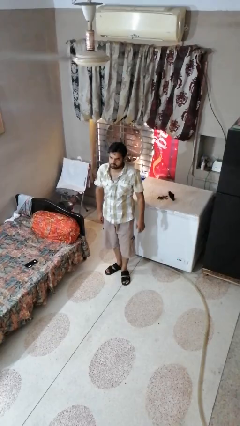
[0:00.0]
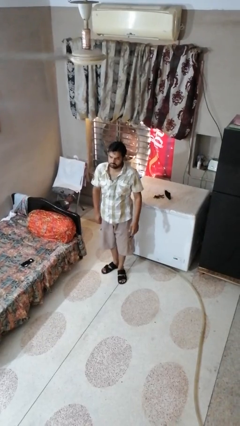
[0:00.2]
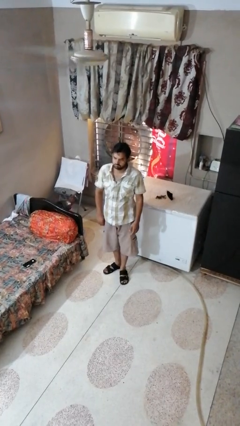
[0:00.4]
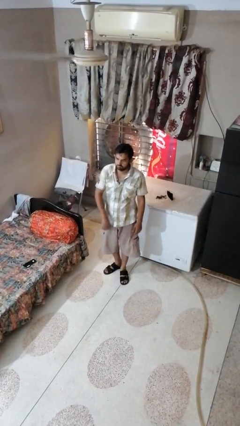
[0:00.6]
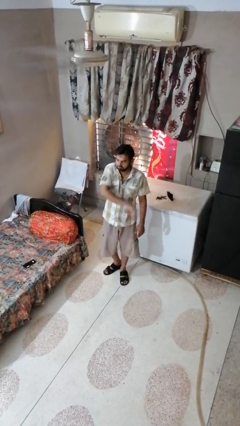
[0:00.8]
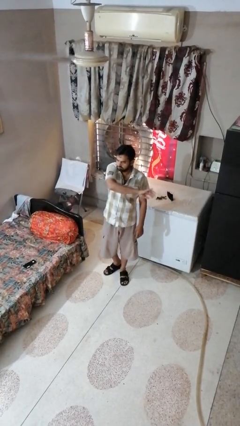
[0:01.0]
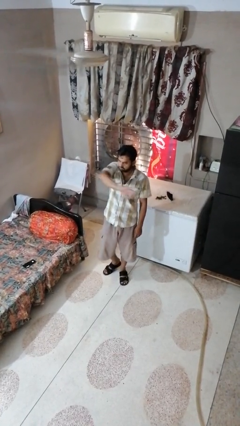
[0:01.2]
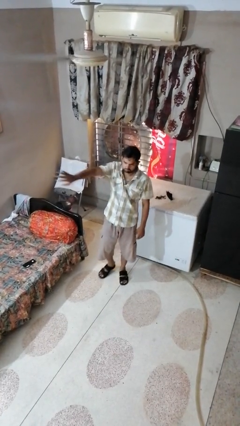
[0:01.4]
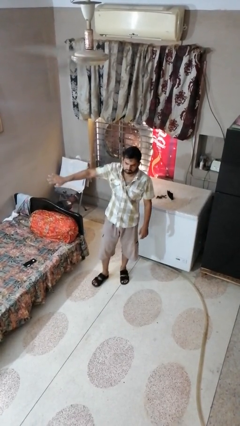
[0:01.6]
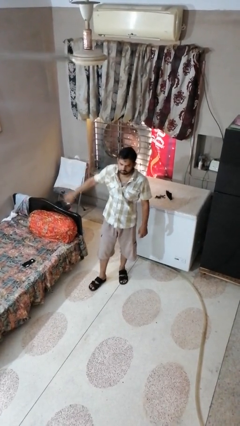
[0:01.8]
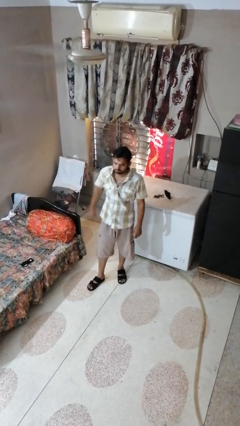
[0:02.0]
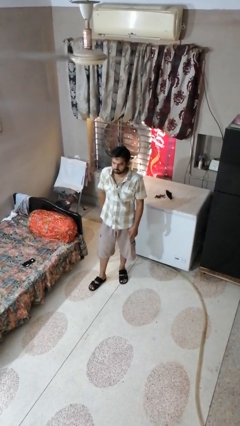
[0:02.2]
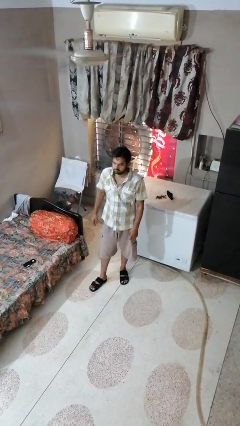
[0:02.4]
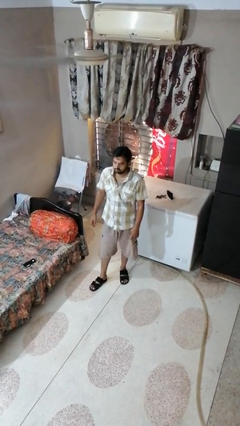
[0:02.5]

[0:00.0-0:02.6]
person gestures swipe right

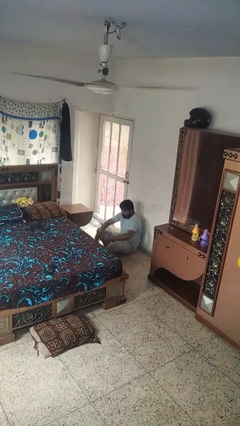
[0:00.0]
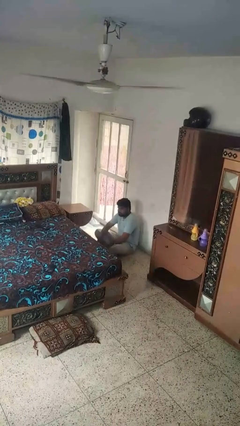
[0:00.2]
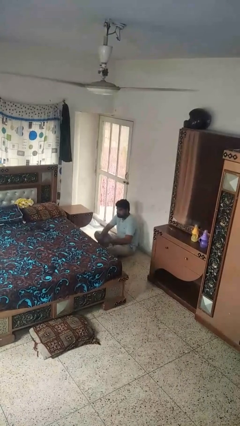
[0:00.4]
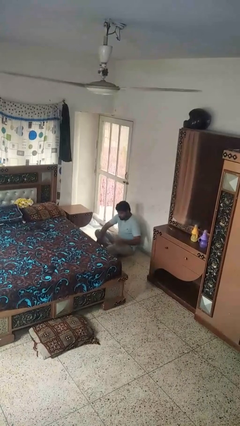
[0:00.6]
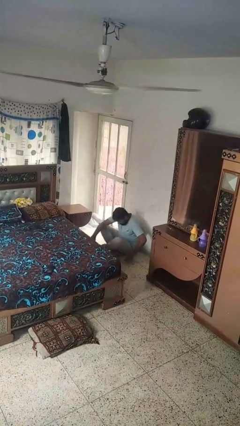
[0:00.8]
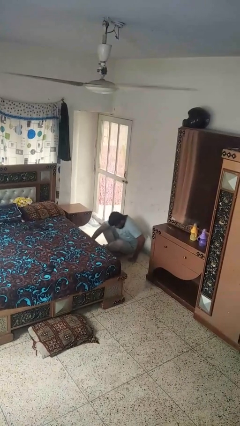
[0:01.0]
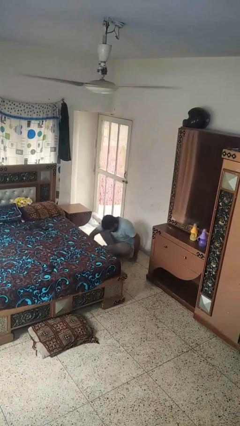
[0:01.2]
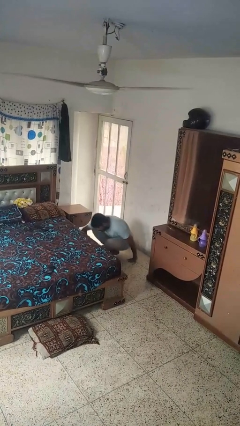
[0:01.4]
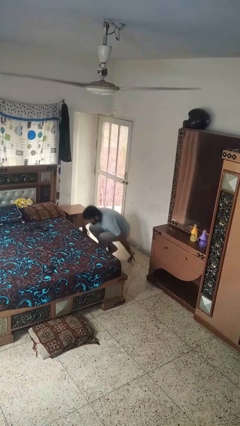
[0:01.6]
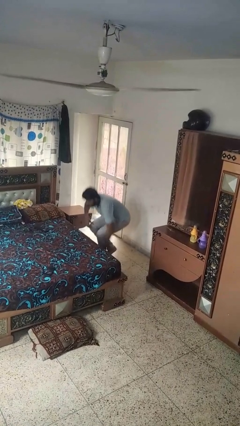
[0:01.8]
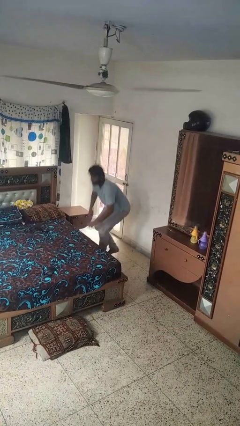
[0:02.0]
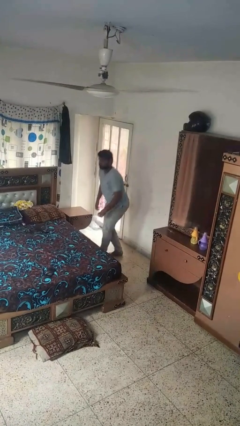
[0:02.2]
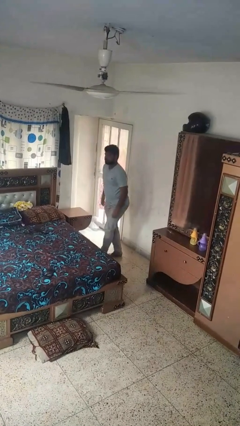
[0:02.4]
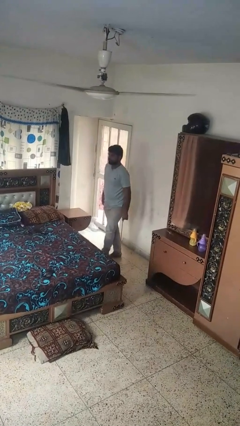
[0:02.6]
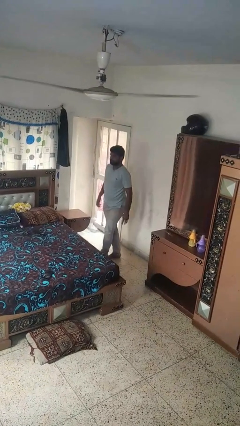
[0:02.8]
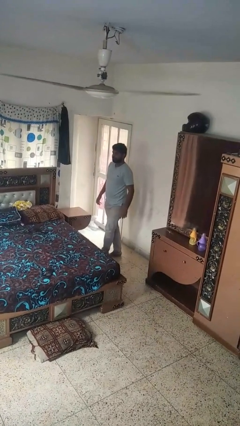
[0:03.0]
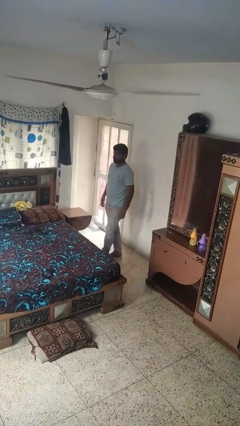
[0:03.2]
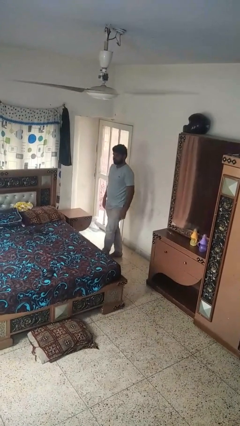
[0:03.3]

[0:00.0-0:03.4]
person stands up from floor

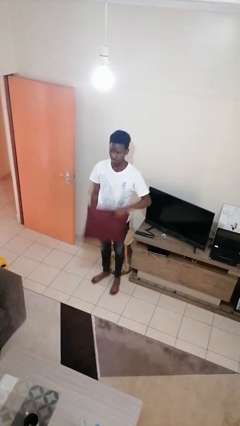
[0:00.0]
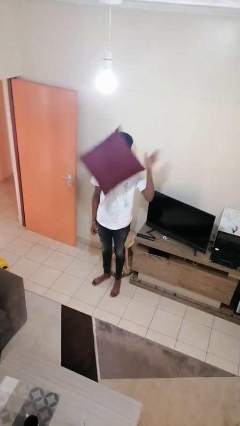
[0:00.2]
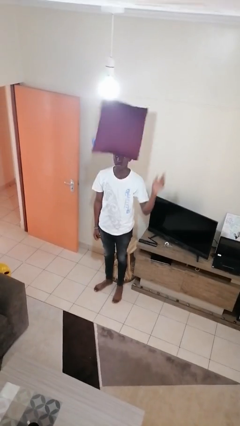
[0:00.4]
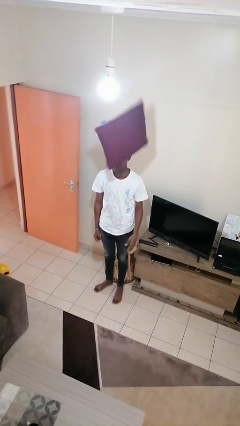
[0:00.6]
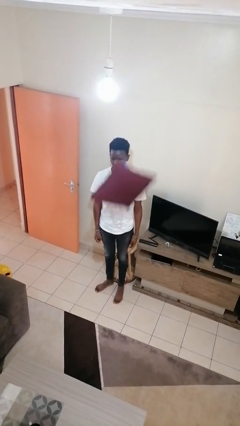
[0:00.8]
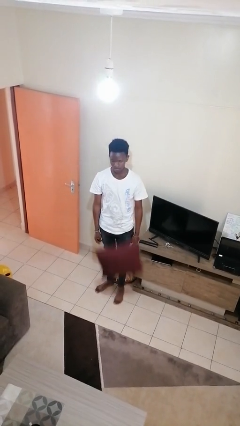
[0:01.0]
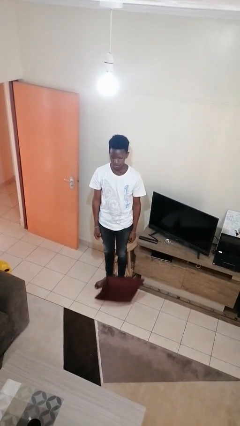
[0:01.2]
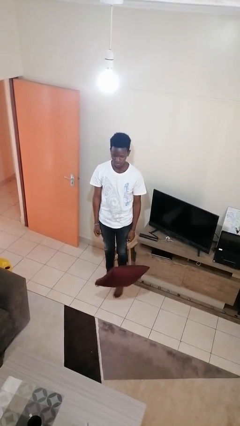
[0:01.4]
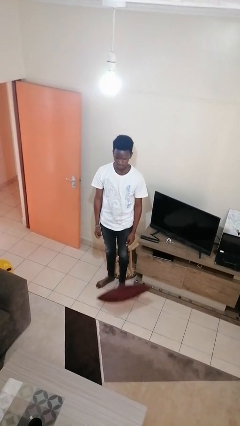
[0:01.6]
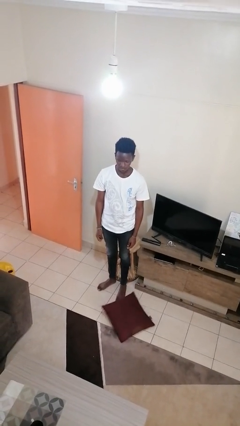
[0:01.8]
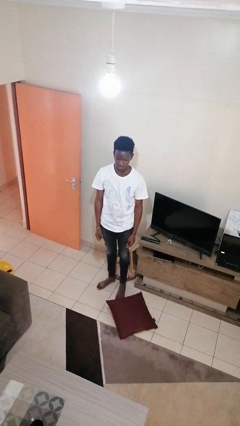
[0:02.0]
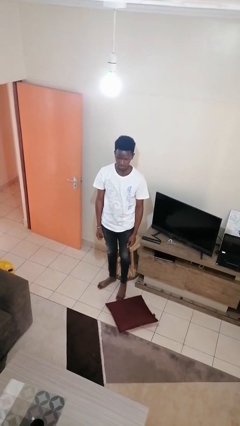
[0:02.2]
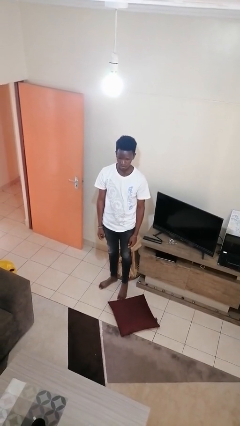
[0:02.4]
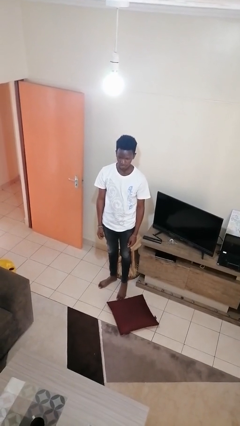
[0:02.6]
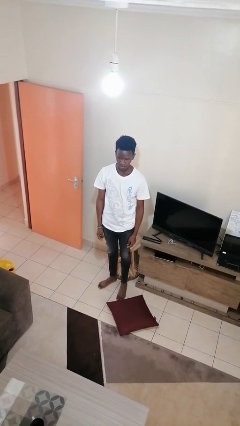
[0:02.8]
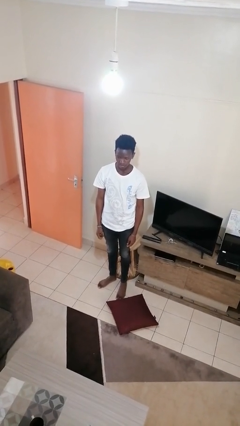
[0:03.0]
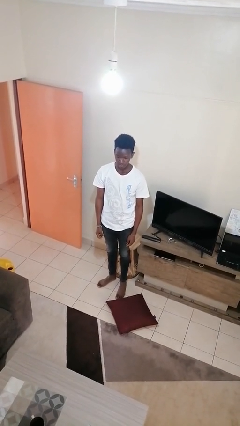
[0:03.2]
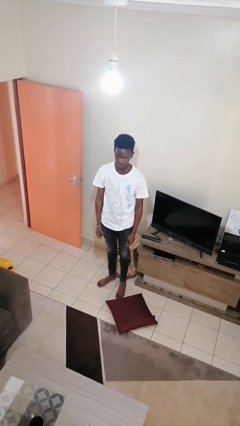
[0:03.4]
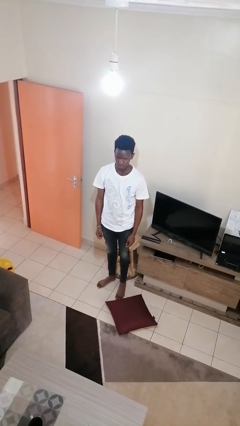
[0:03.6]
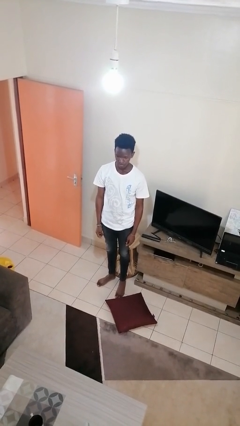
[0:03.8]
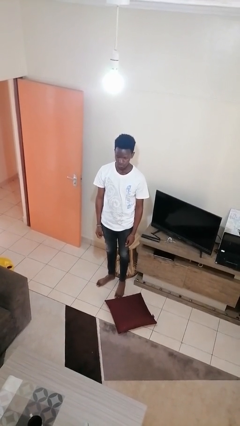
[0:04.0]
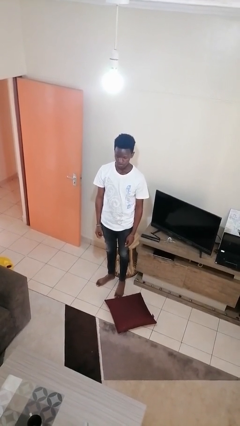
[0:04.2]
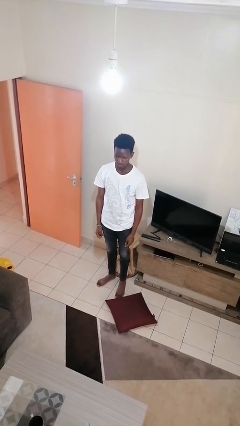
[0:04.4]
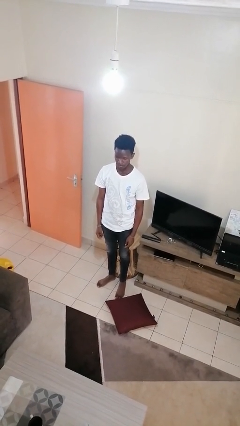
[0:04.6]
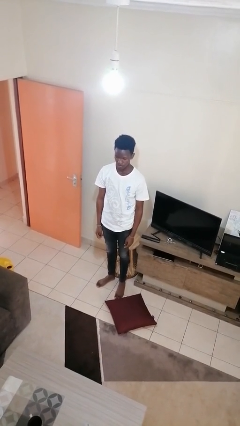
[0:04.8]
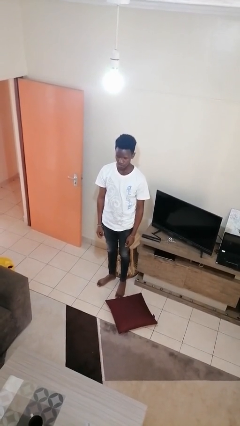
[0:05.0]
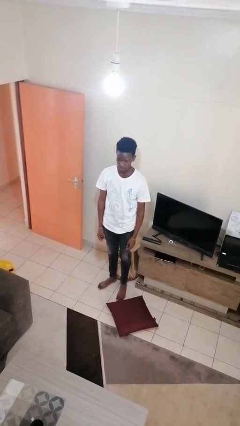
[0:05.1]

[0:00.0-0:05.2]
person throws object into air

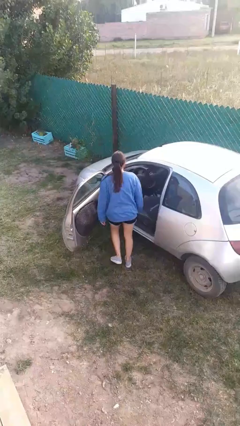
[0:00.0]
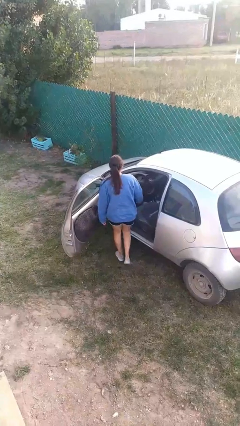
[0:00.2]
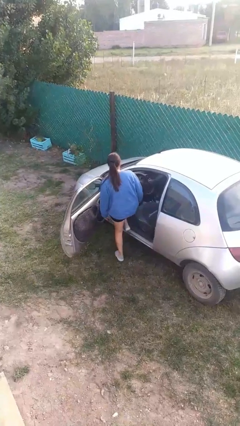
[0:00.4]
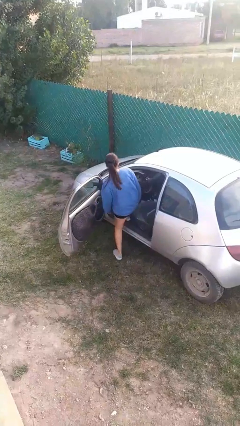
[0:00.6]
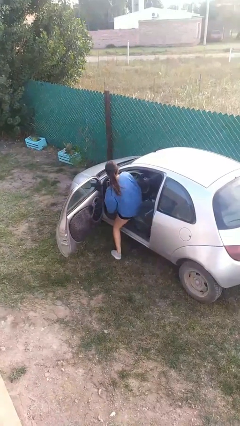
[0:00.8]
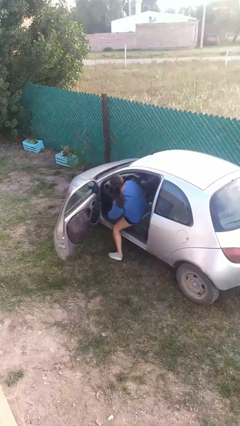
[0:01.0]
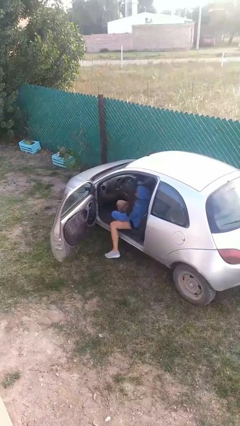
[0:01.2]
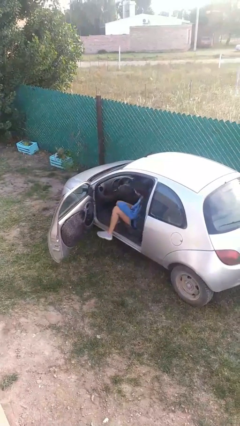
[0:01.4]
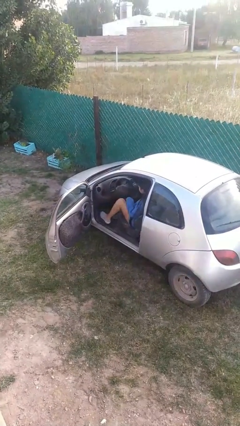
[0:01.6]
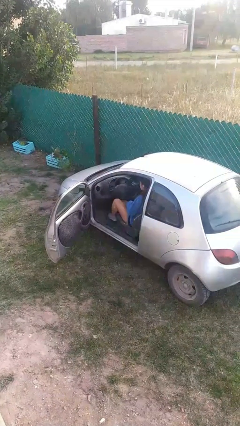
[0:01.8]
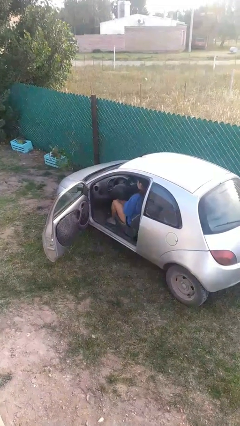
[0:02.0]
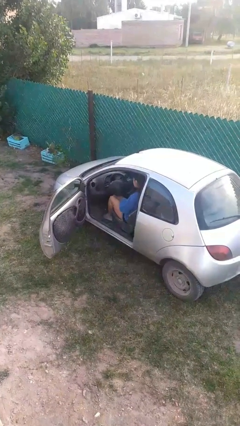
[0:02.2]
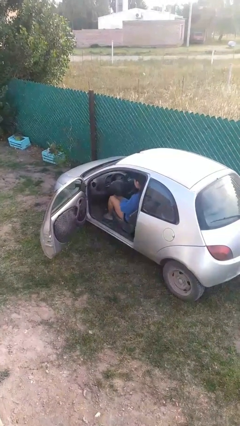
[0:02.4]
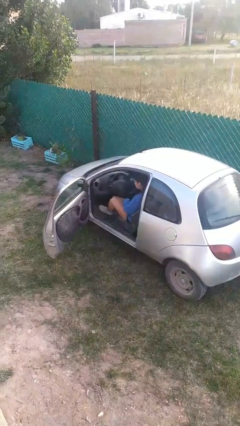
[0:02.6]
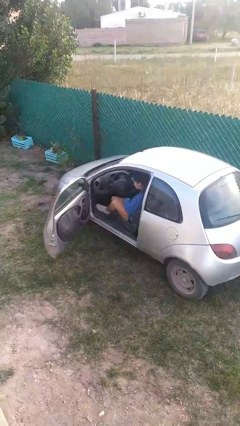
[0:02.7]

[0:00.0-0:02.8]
person enters car

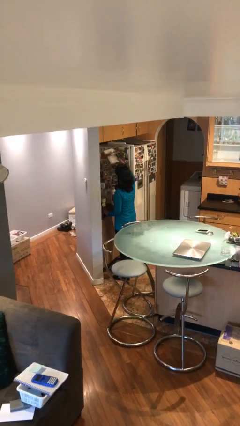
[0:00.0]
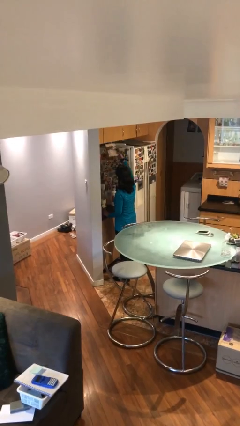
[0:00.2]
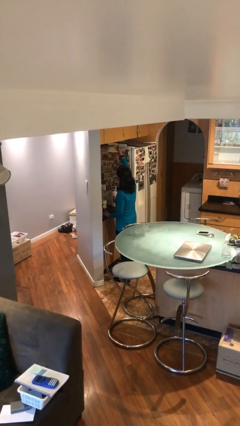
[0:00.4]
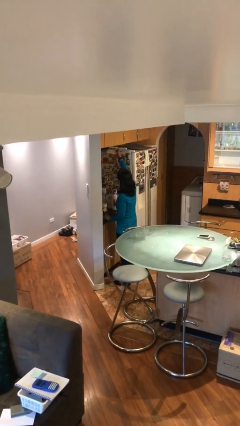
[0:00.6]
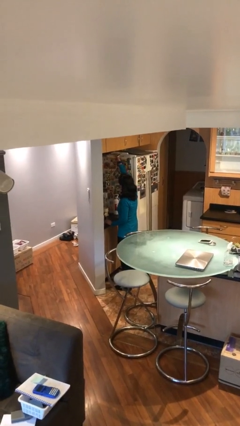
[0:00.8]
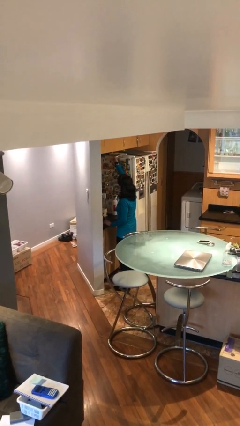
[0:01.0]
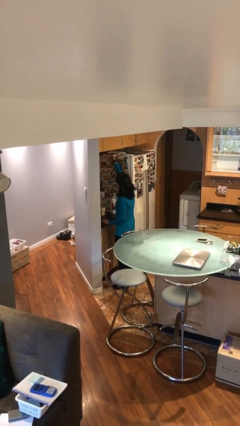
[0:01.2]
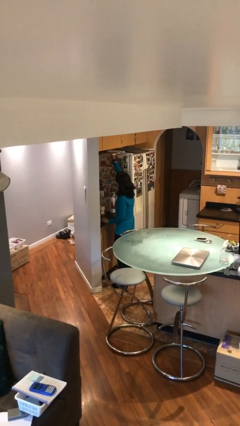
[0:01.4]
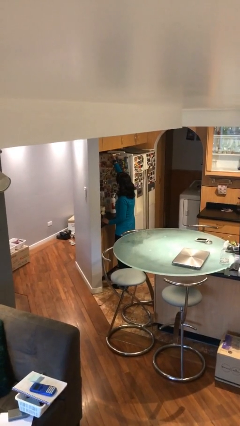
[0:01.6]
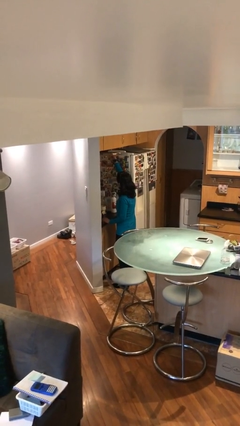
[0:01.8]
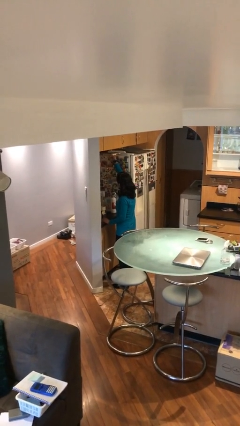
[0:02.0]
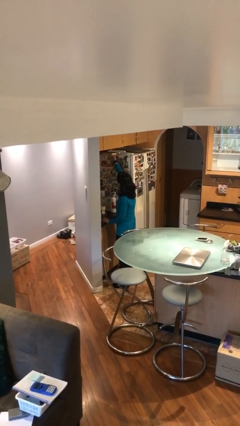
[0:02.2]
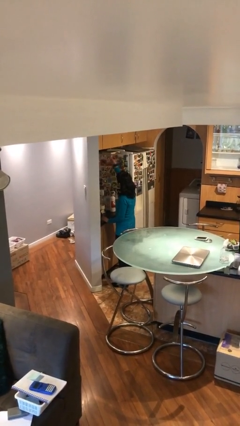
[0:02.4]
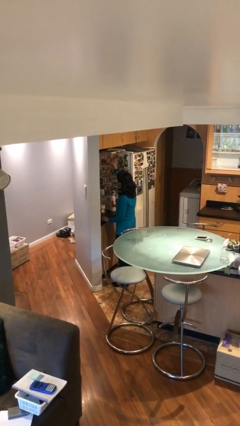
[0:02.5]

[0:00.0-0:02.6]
person puts down object on shelf

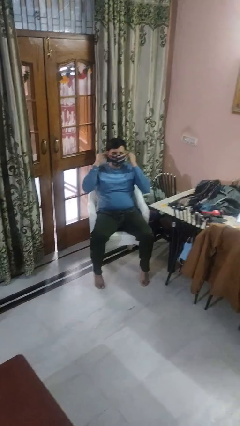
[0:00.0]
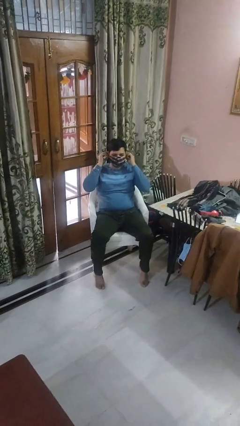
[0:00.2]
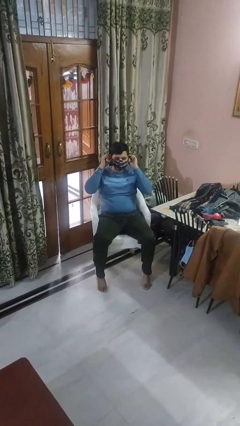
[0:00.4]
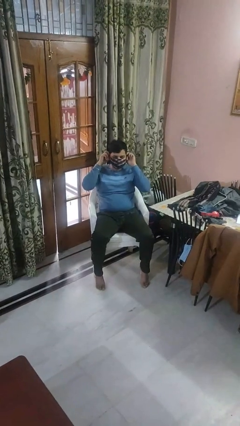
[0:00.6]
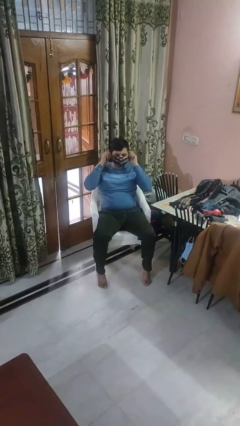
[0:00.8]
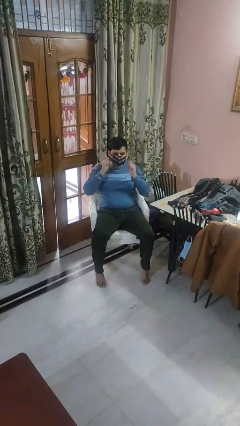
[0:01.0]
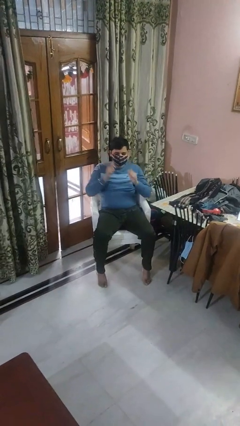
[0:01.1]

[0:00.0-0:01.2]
person puts on facemask
